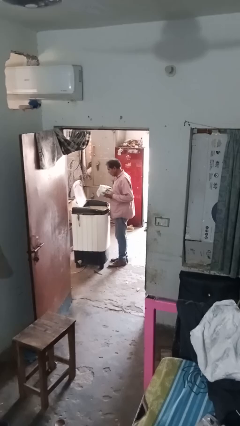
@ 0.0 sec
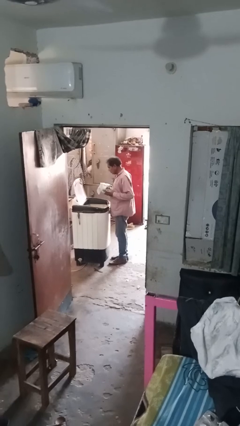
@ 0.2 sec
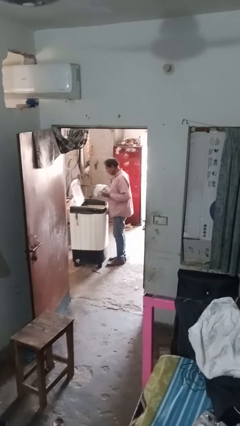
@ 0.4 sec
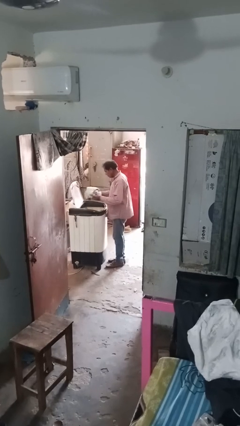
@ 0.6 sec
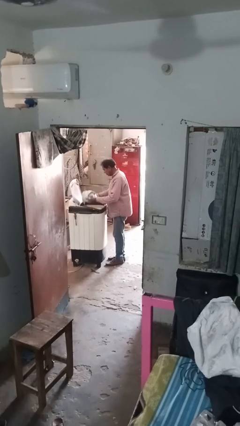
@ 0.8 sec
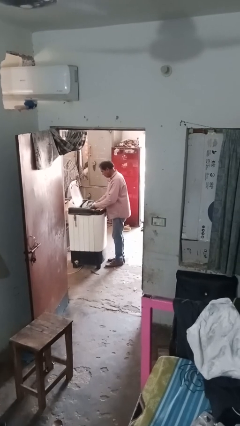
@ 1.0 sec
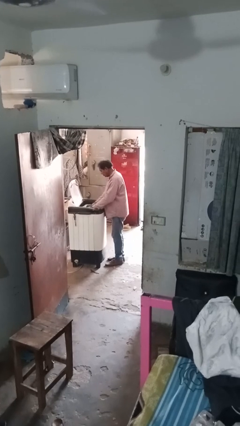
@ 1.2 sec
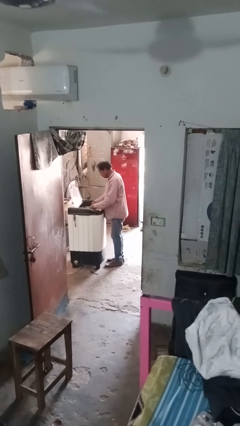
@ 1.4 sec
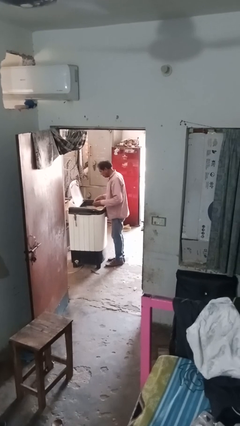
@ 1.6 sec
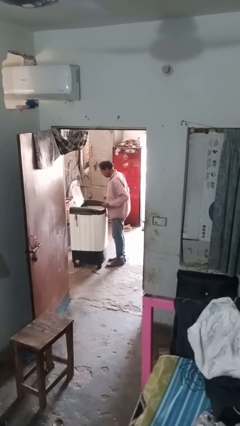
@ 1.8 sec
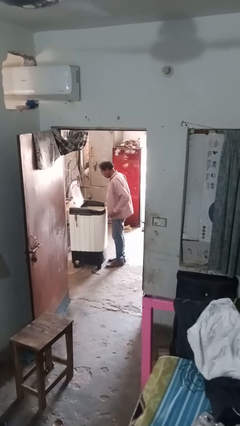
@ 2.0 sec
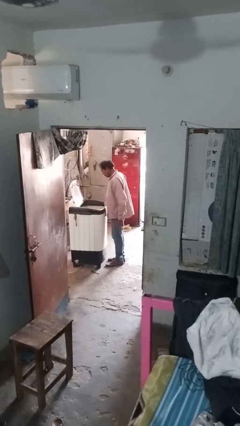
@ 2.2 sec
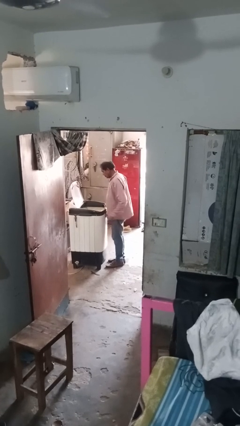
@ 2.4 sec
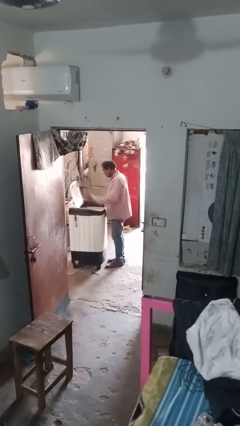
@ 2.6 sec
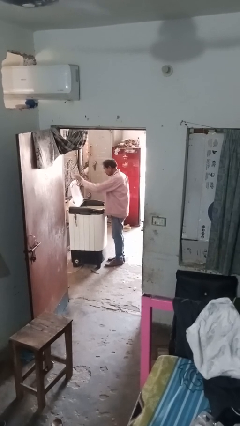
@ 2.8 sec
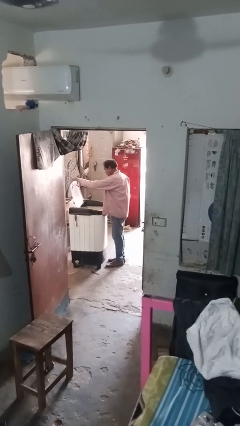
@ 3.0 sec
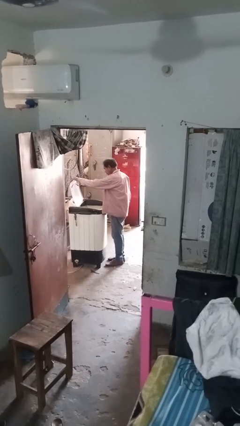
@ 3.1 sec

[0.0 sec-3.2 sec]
person loads clotheswasher

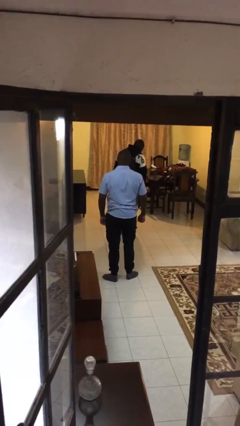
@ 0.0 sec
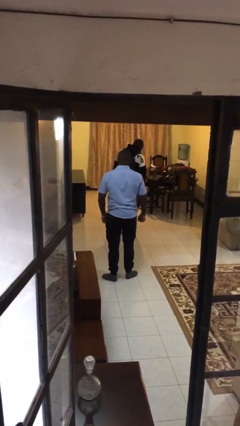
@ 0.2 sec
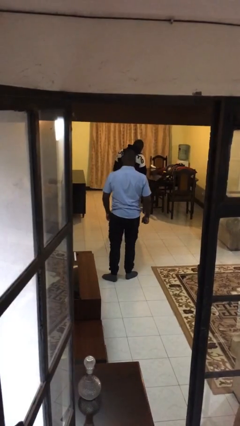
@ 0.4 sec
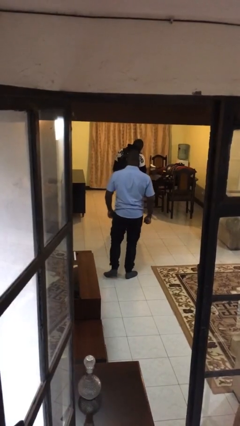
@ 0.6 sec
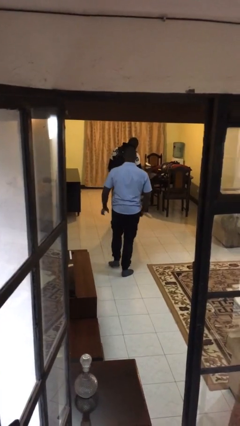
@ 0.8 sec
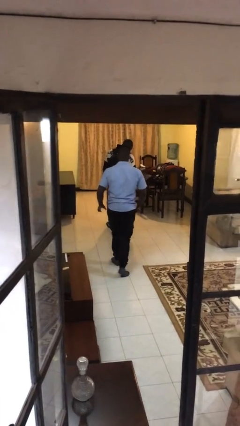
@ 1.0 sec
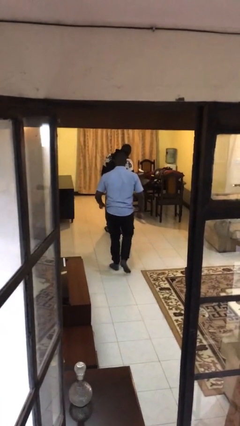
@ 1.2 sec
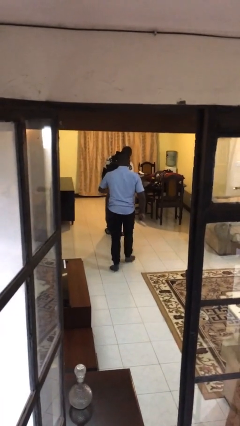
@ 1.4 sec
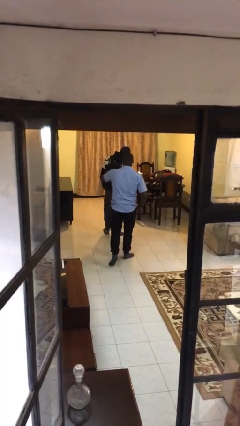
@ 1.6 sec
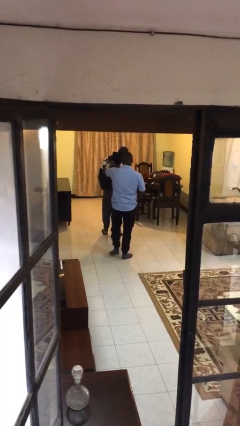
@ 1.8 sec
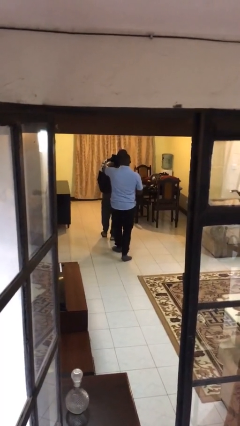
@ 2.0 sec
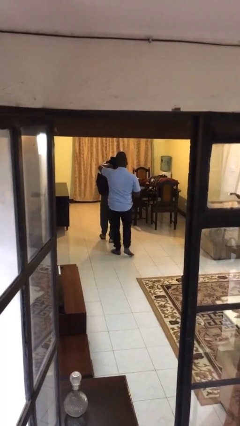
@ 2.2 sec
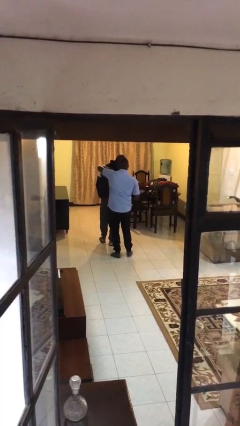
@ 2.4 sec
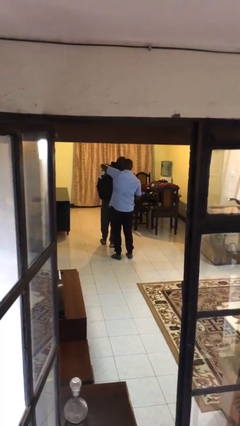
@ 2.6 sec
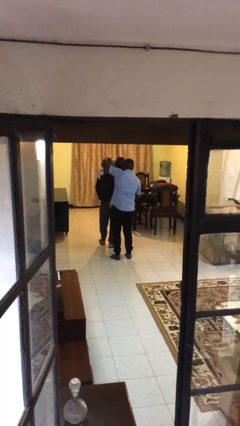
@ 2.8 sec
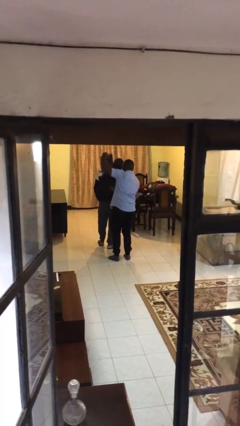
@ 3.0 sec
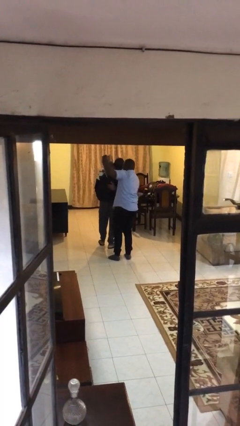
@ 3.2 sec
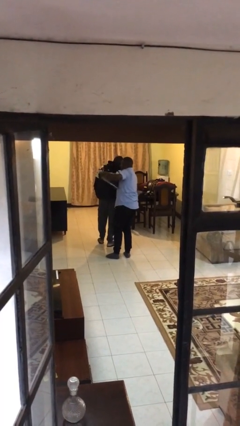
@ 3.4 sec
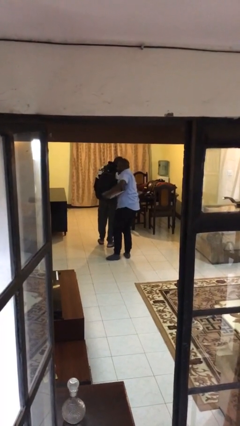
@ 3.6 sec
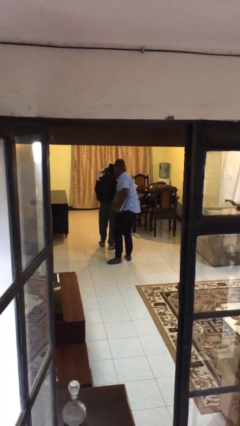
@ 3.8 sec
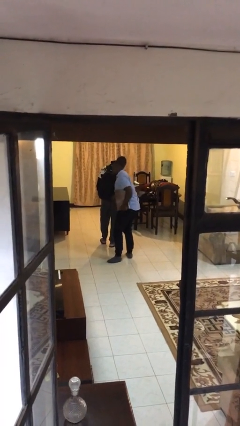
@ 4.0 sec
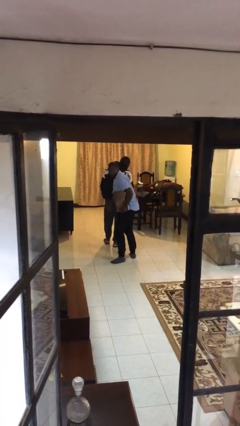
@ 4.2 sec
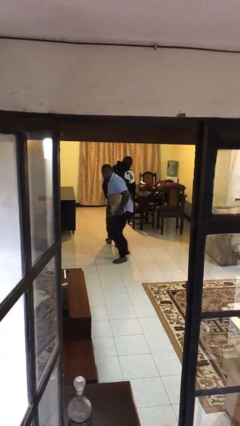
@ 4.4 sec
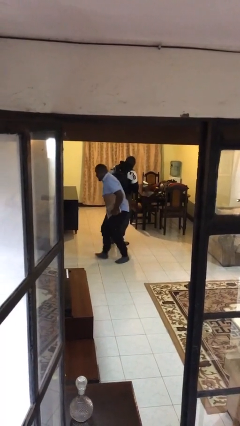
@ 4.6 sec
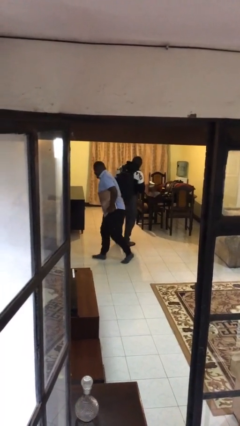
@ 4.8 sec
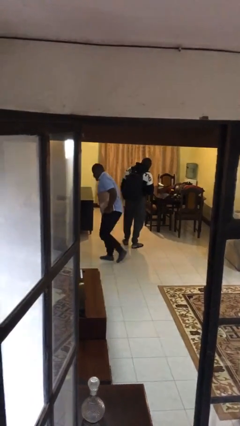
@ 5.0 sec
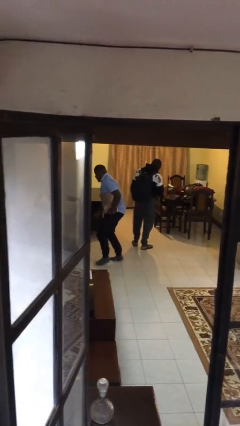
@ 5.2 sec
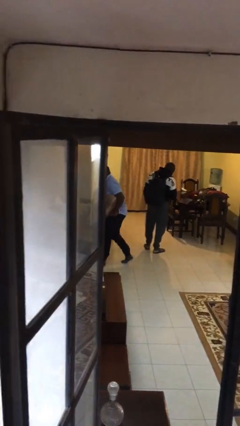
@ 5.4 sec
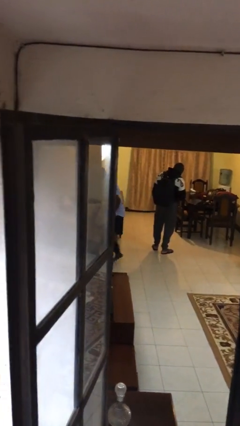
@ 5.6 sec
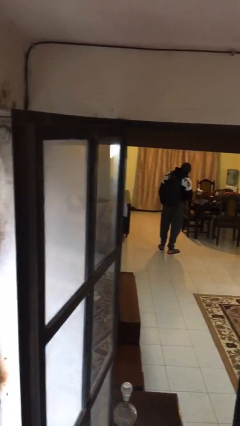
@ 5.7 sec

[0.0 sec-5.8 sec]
person steals object from person

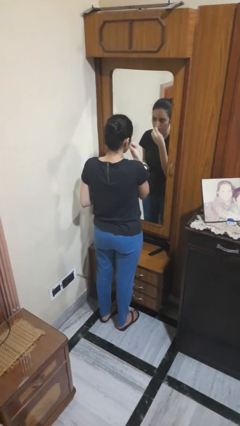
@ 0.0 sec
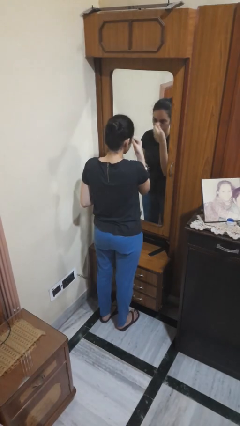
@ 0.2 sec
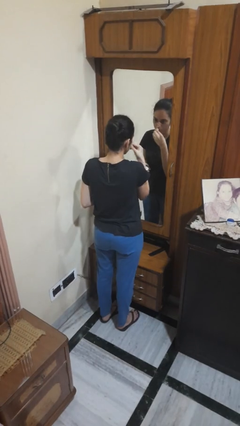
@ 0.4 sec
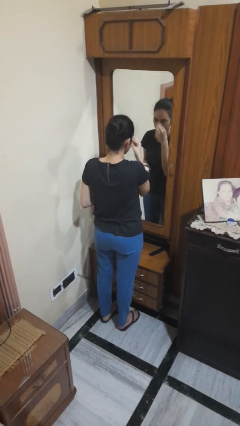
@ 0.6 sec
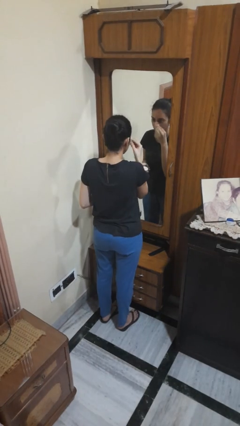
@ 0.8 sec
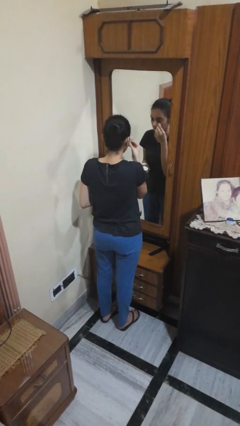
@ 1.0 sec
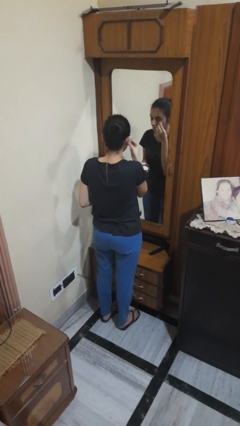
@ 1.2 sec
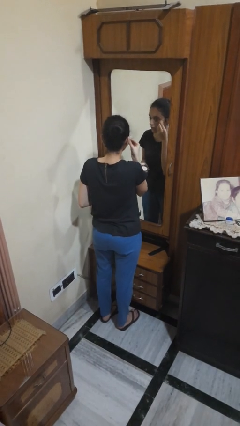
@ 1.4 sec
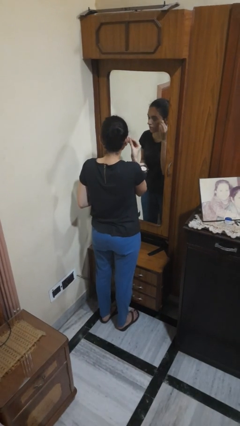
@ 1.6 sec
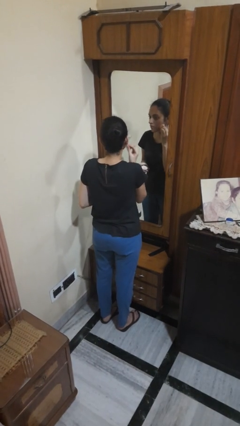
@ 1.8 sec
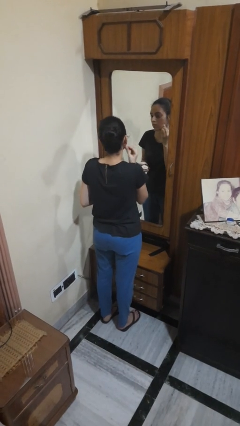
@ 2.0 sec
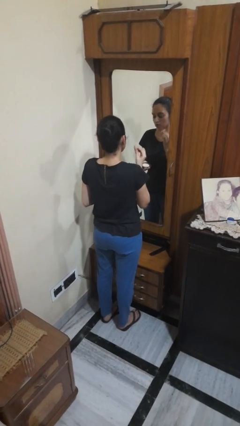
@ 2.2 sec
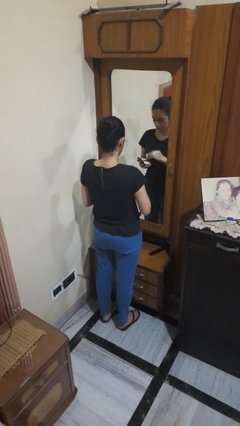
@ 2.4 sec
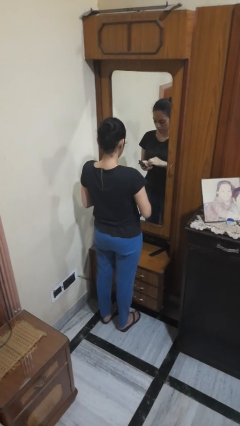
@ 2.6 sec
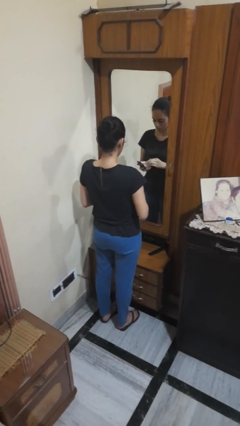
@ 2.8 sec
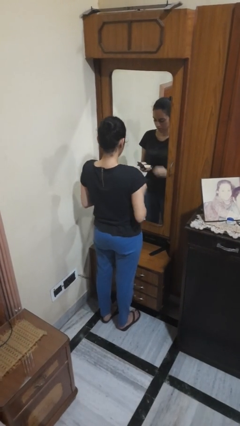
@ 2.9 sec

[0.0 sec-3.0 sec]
person applies foundation makeup

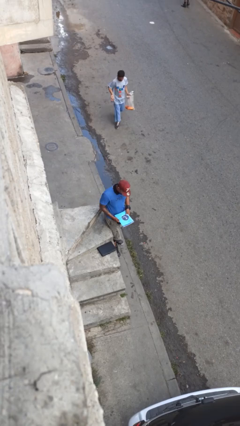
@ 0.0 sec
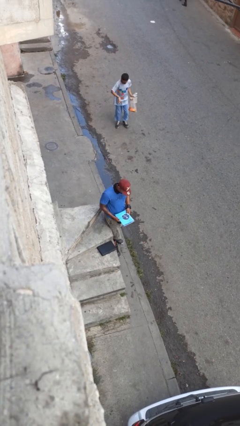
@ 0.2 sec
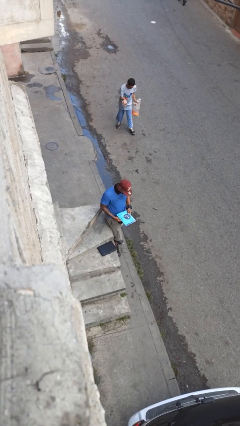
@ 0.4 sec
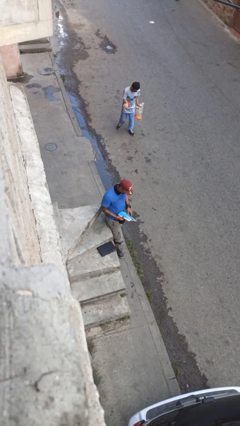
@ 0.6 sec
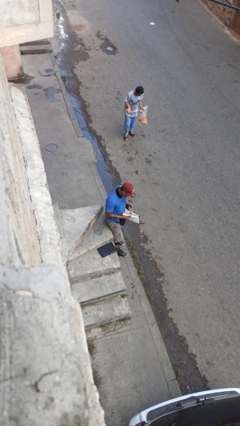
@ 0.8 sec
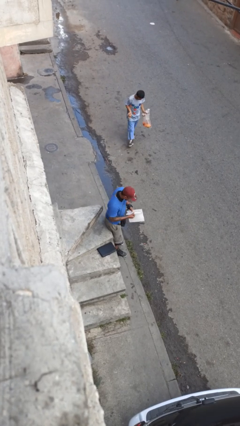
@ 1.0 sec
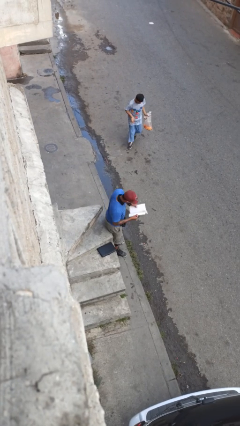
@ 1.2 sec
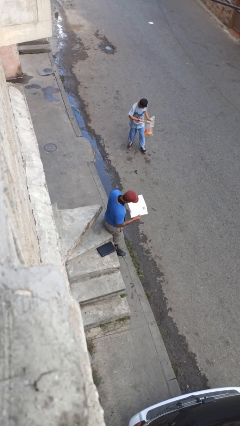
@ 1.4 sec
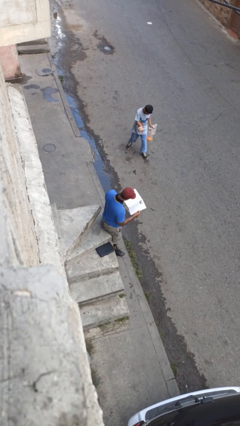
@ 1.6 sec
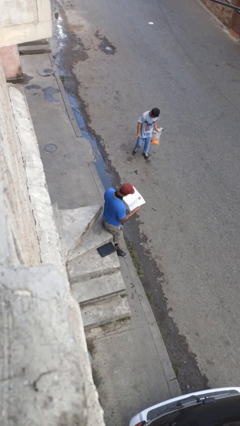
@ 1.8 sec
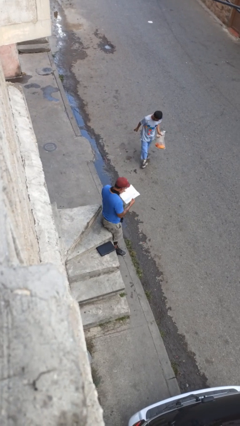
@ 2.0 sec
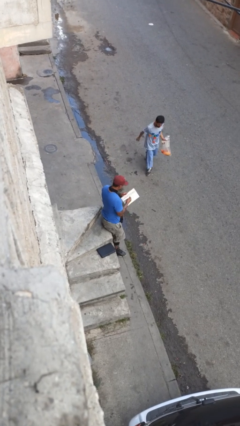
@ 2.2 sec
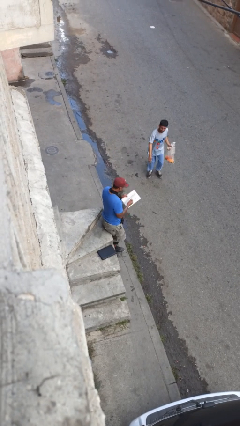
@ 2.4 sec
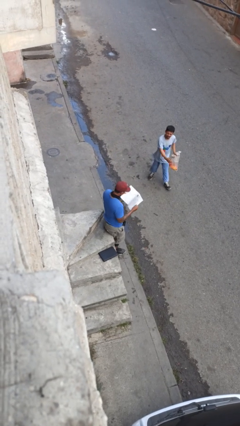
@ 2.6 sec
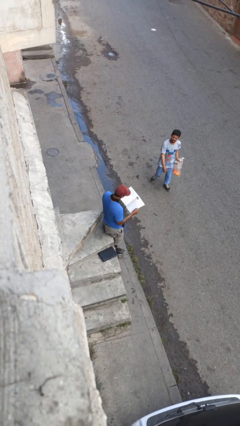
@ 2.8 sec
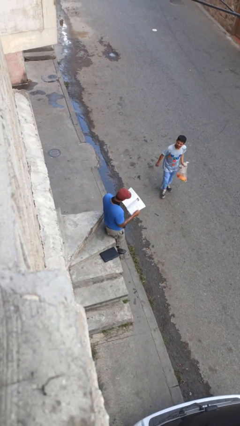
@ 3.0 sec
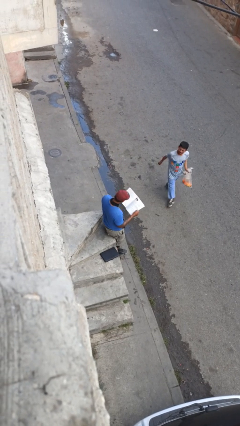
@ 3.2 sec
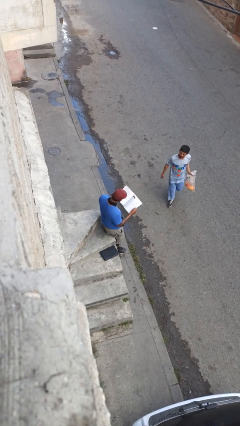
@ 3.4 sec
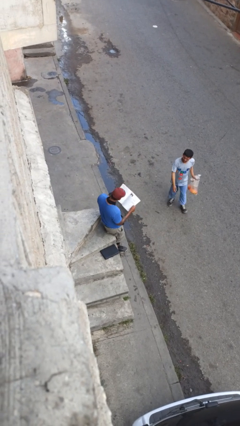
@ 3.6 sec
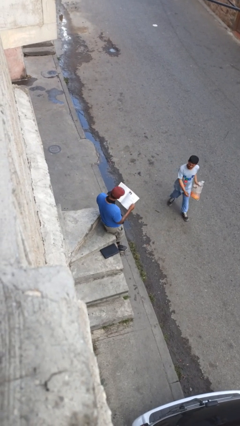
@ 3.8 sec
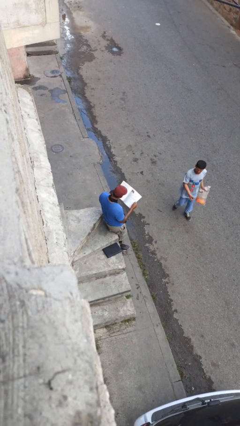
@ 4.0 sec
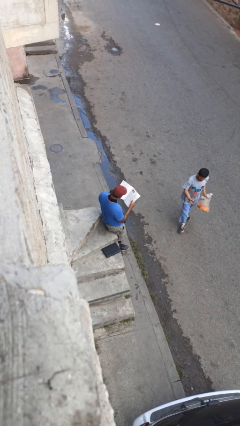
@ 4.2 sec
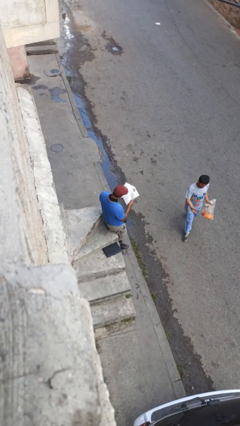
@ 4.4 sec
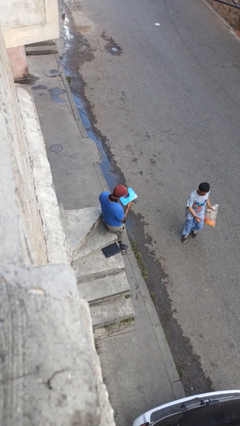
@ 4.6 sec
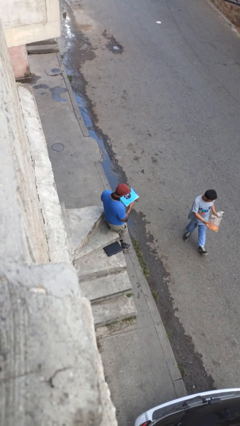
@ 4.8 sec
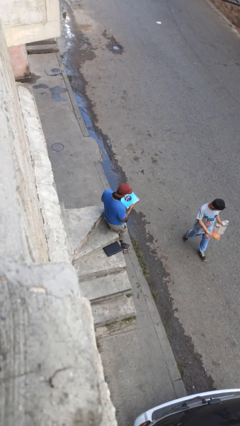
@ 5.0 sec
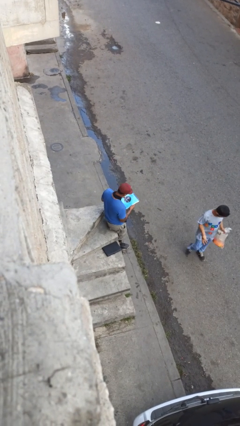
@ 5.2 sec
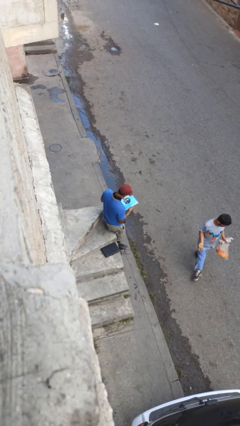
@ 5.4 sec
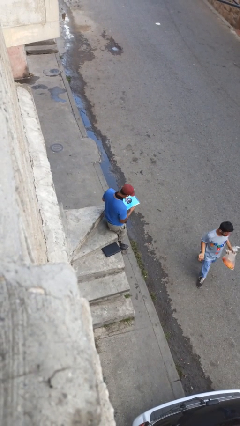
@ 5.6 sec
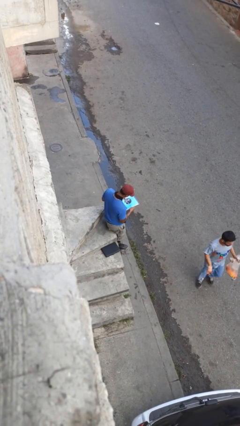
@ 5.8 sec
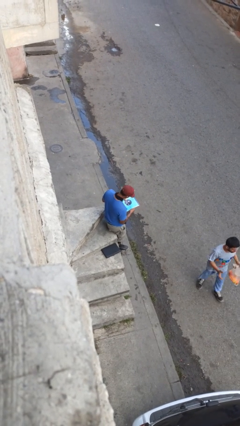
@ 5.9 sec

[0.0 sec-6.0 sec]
person reads document
